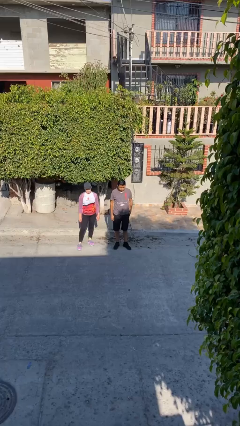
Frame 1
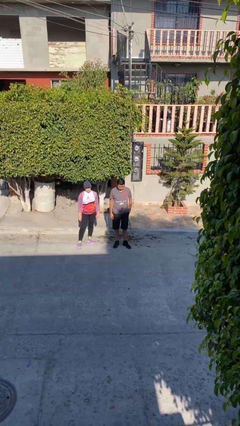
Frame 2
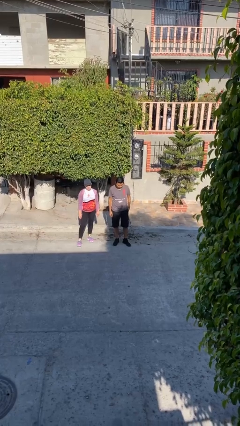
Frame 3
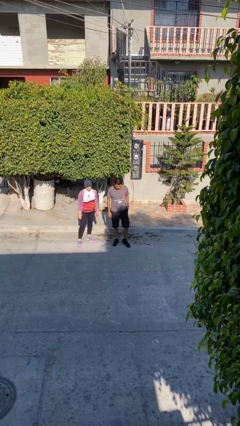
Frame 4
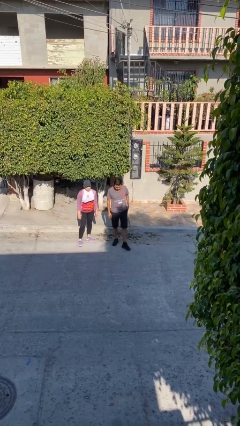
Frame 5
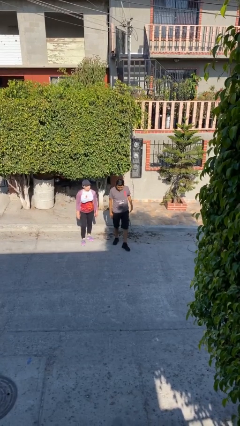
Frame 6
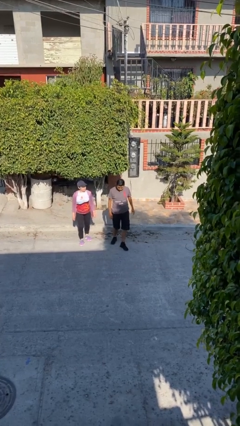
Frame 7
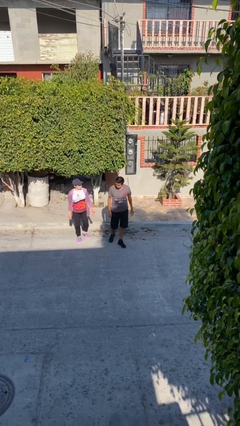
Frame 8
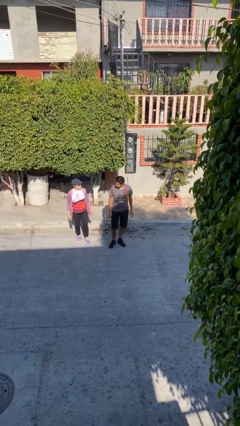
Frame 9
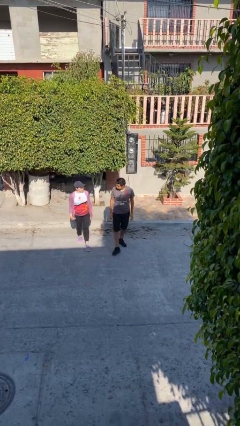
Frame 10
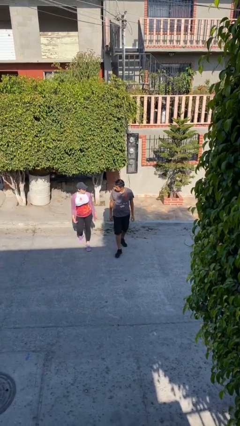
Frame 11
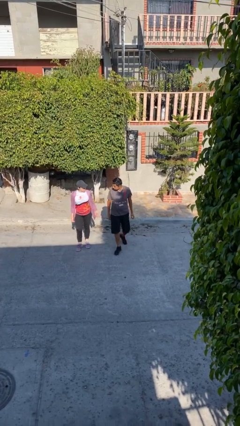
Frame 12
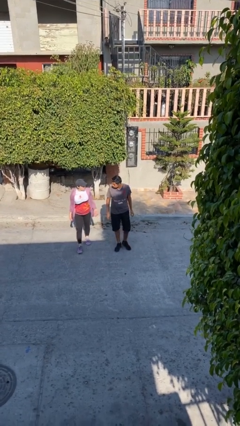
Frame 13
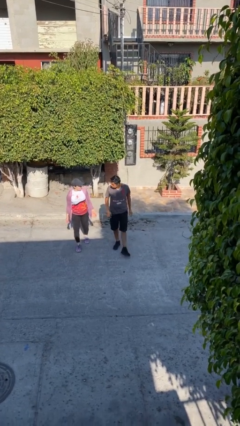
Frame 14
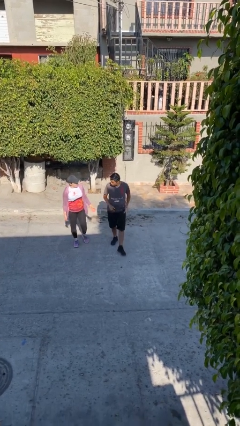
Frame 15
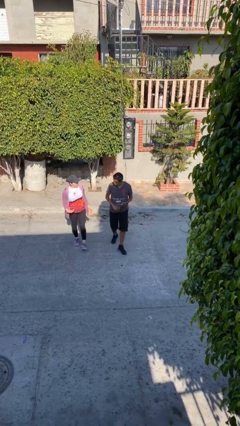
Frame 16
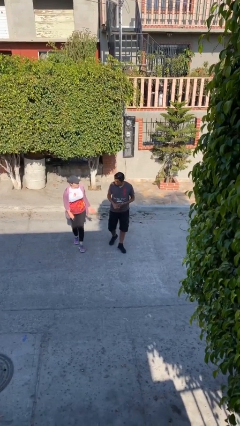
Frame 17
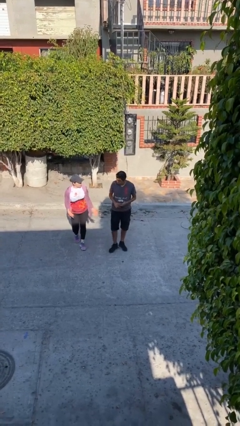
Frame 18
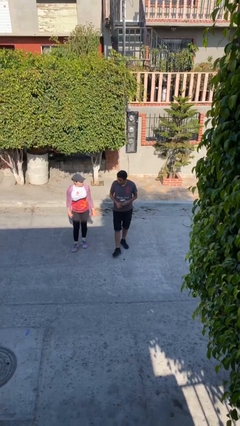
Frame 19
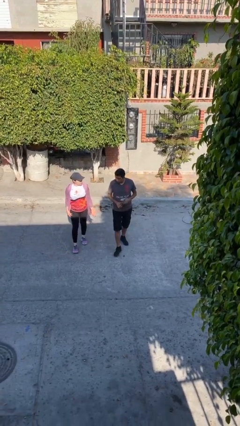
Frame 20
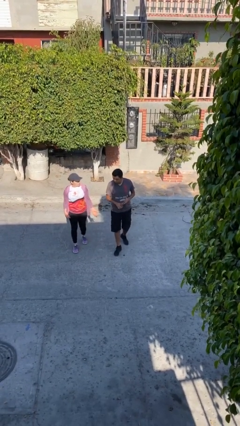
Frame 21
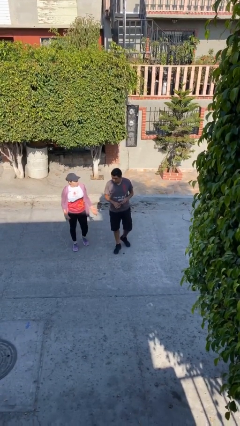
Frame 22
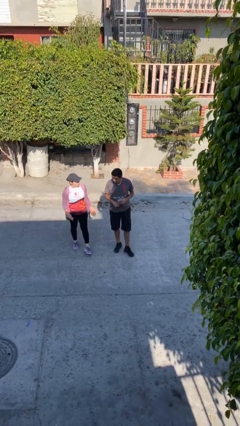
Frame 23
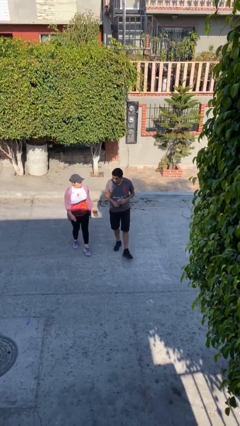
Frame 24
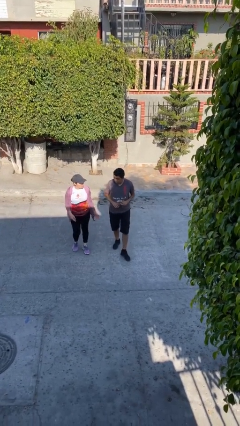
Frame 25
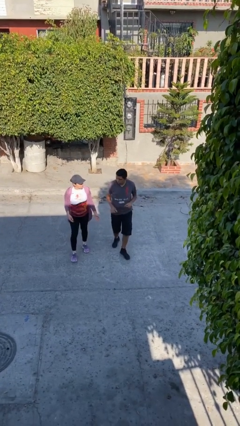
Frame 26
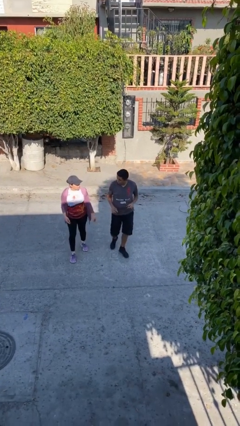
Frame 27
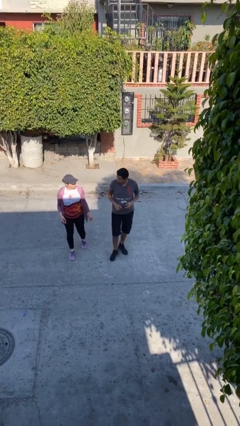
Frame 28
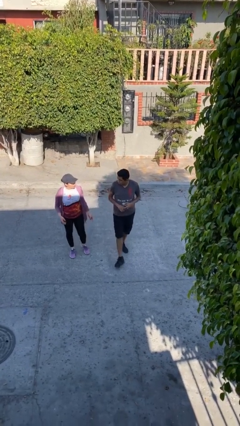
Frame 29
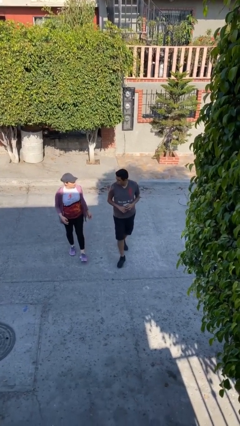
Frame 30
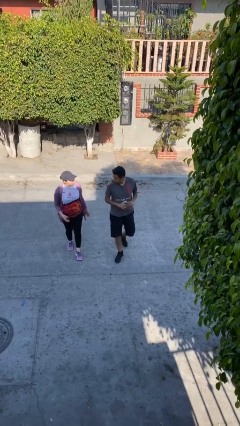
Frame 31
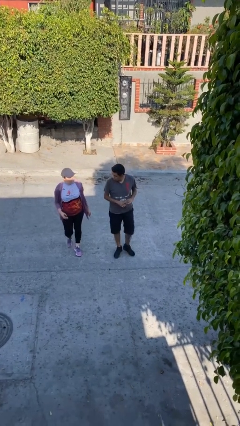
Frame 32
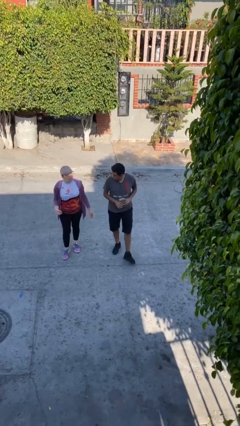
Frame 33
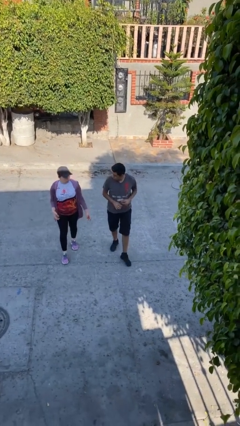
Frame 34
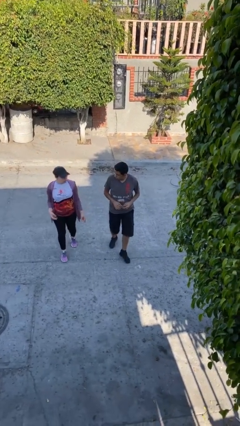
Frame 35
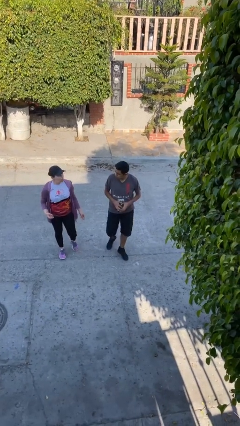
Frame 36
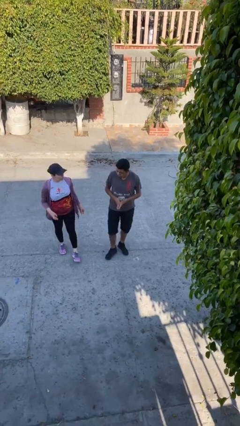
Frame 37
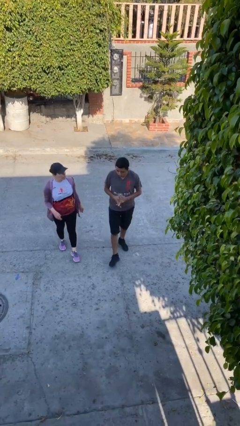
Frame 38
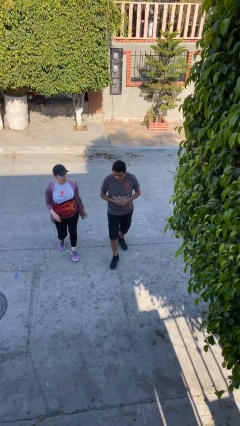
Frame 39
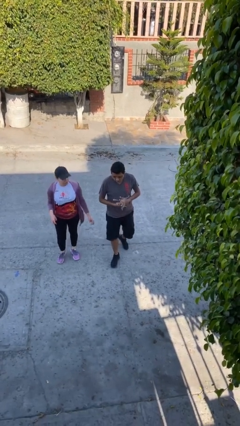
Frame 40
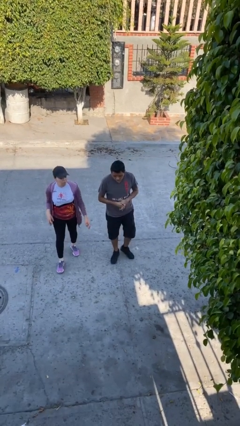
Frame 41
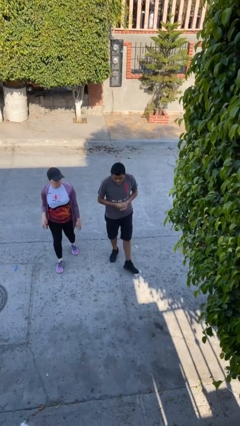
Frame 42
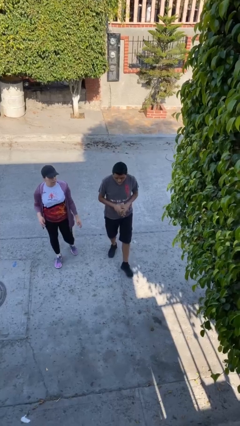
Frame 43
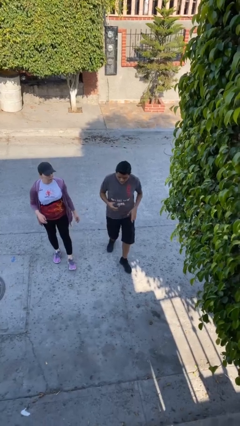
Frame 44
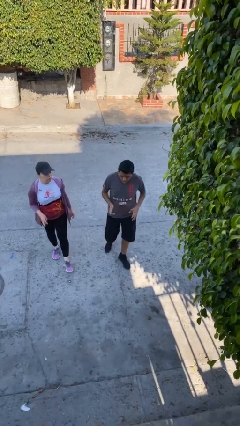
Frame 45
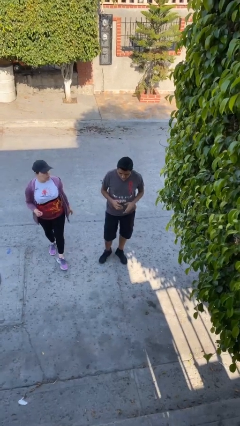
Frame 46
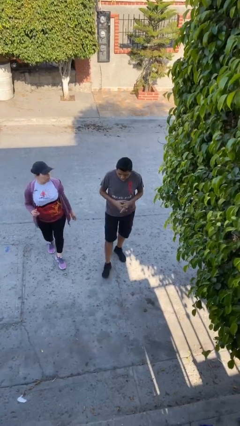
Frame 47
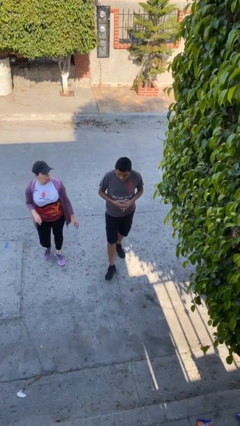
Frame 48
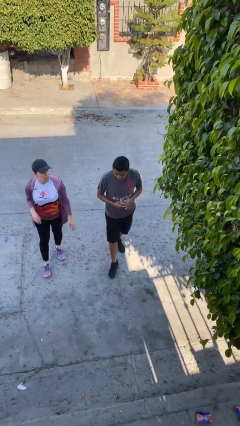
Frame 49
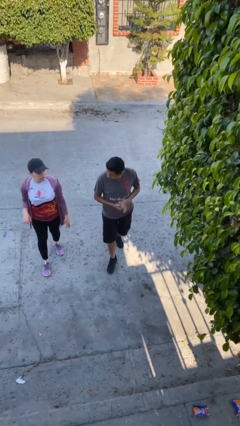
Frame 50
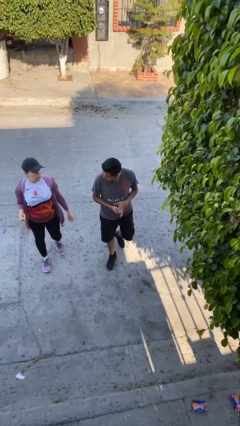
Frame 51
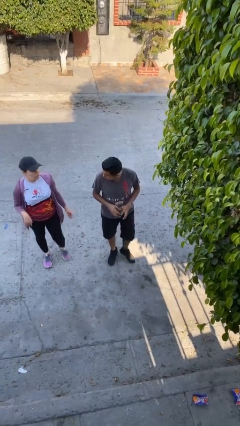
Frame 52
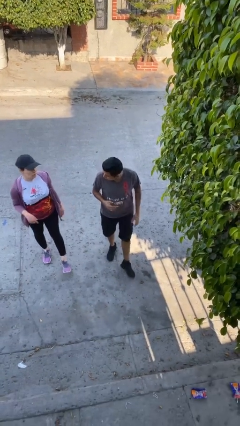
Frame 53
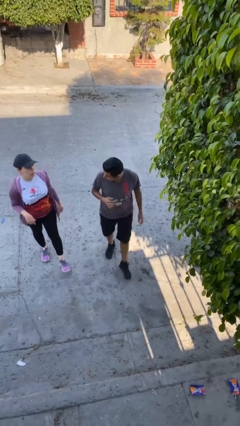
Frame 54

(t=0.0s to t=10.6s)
person talks to person

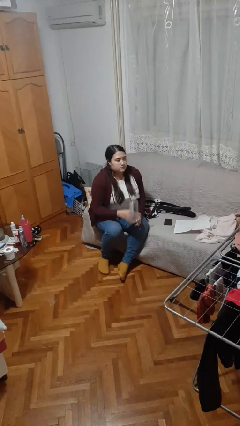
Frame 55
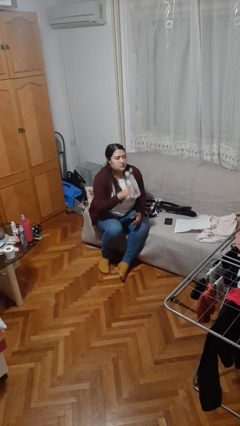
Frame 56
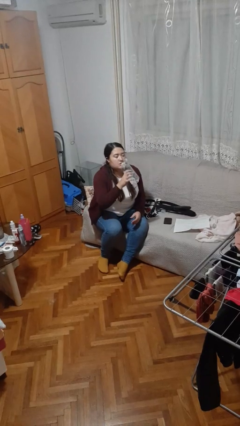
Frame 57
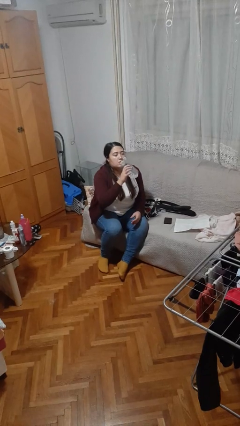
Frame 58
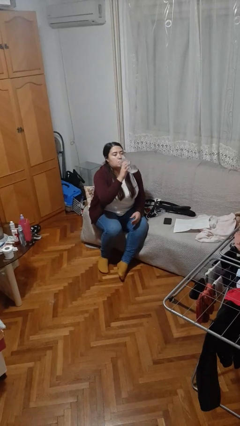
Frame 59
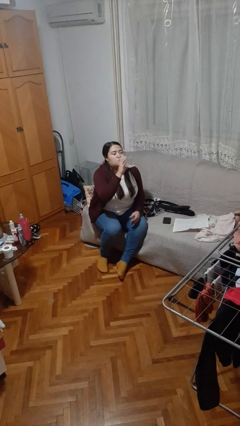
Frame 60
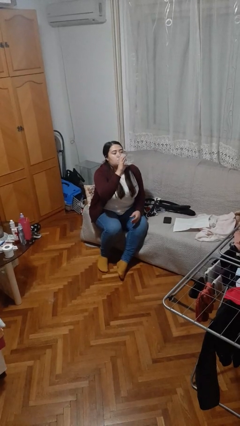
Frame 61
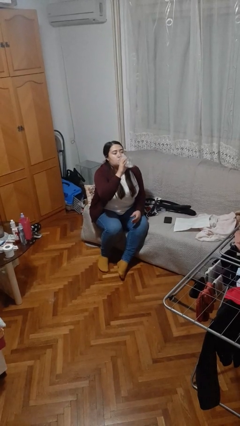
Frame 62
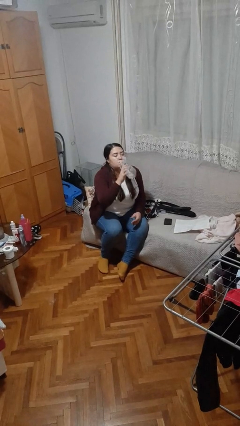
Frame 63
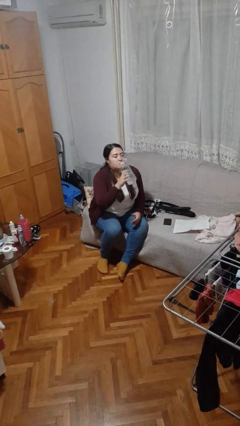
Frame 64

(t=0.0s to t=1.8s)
person drinks from bottle

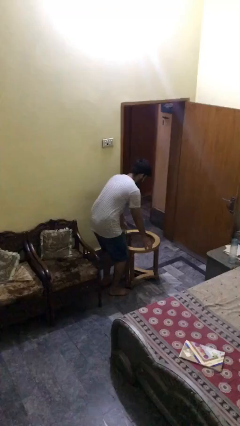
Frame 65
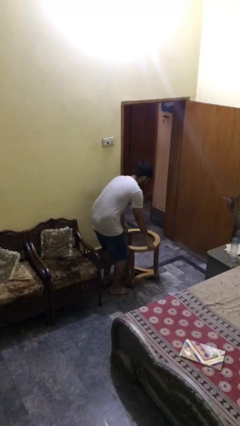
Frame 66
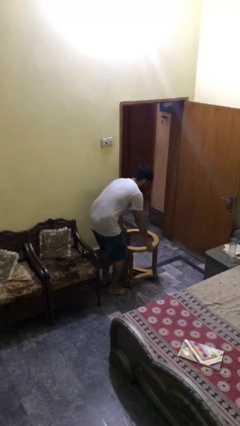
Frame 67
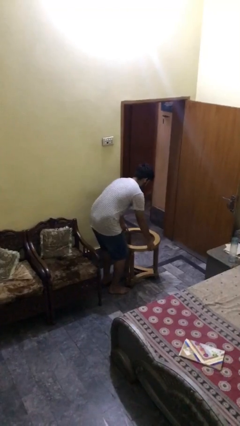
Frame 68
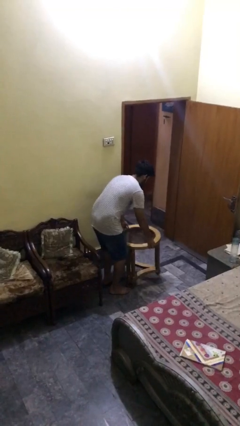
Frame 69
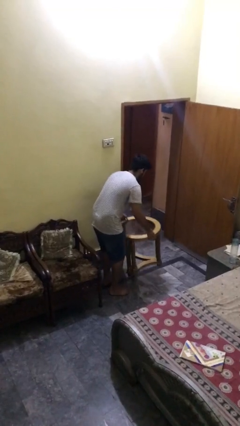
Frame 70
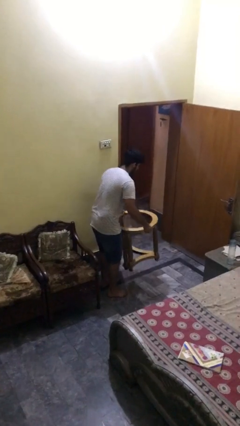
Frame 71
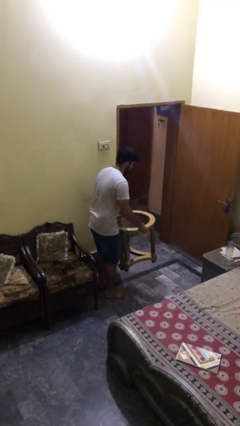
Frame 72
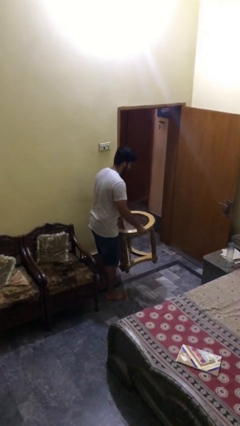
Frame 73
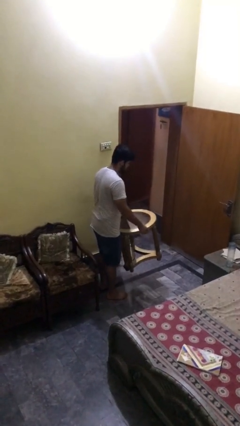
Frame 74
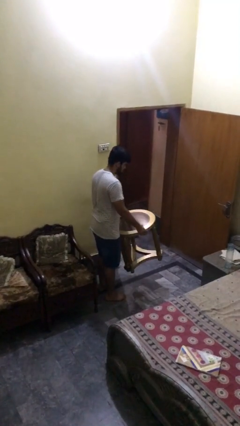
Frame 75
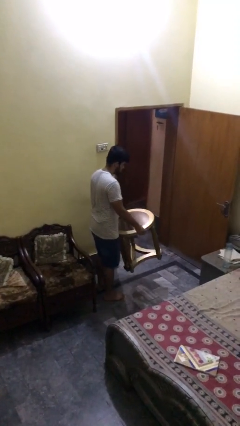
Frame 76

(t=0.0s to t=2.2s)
person picks up object from floor

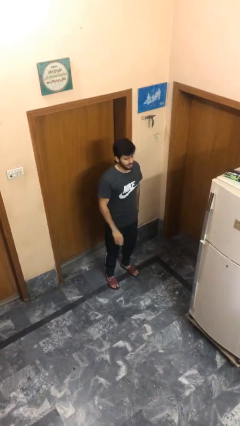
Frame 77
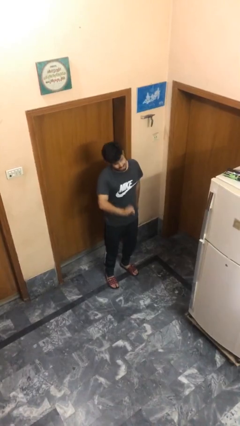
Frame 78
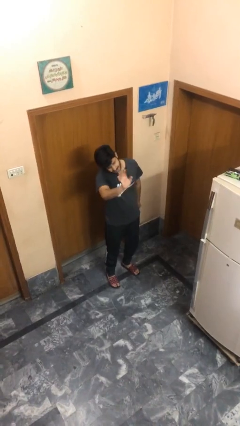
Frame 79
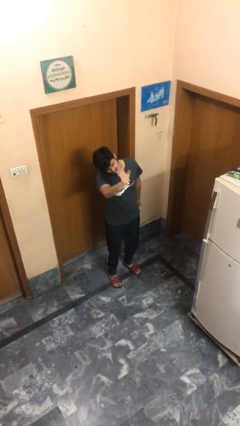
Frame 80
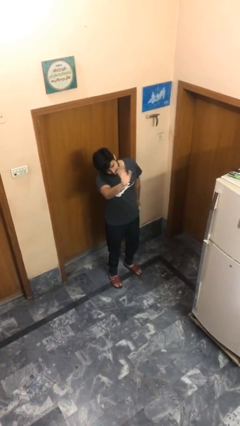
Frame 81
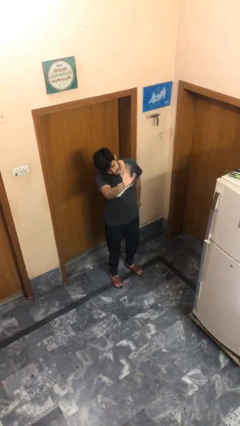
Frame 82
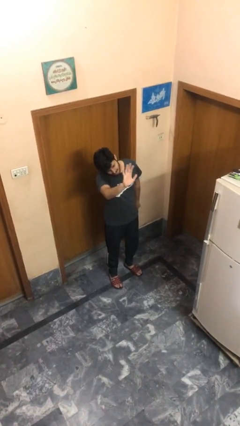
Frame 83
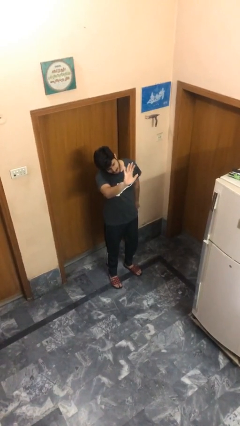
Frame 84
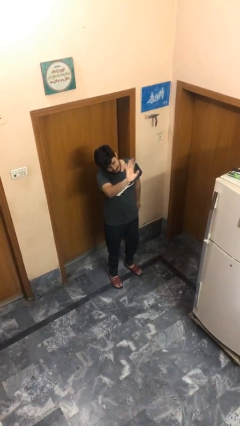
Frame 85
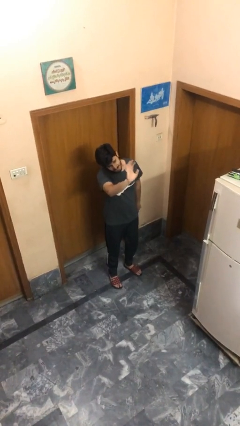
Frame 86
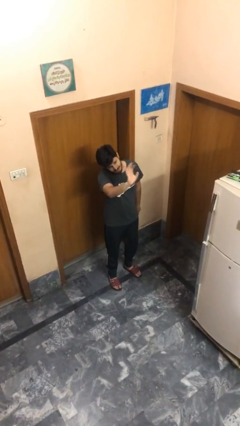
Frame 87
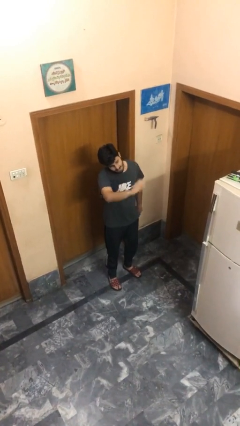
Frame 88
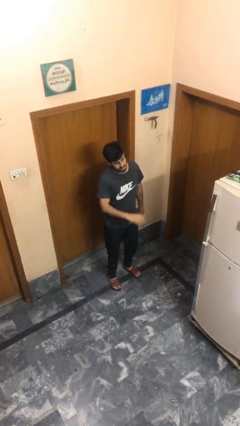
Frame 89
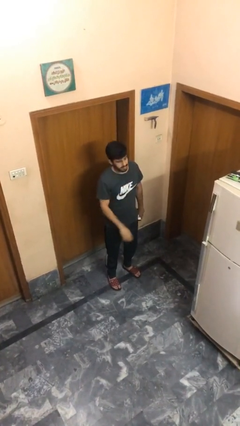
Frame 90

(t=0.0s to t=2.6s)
person waves at person
